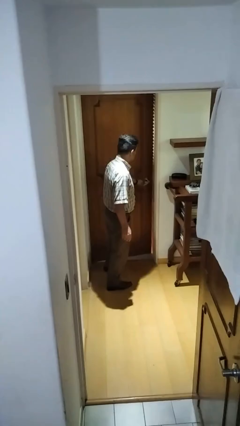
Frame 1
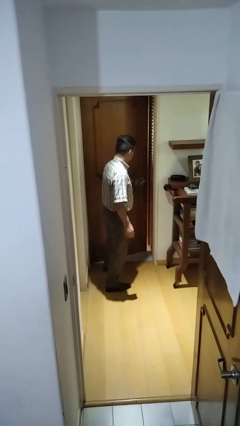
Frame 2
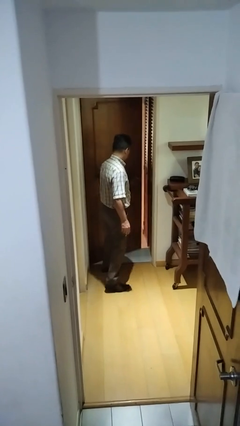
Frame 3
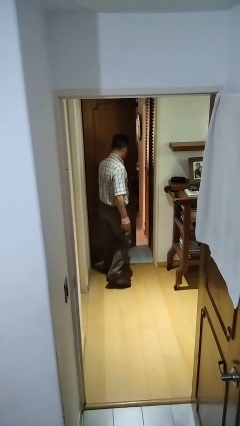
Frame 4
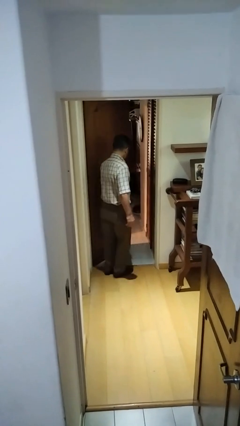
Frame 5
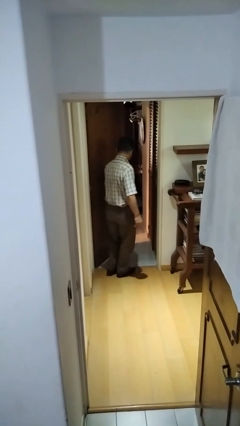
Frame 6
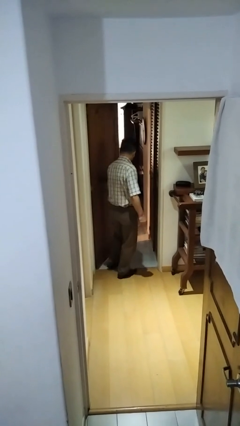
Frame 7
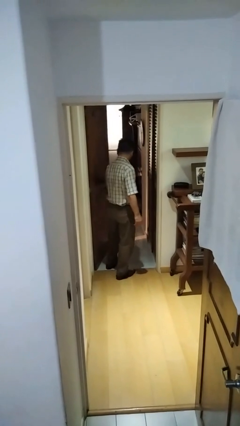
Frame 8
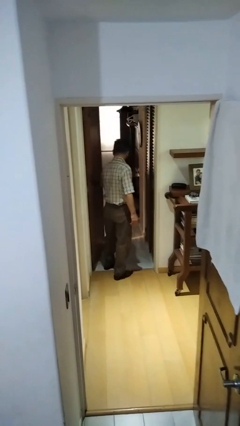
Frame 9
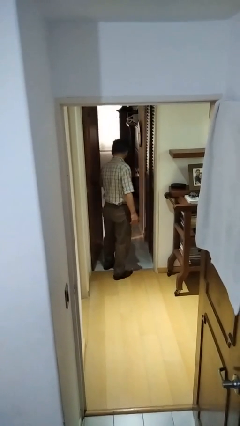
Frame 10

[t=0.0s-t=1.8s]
person opens facility door

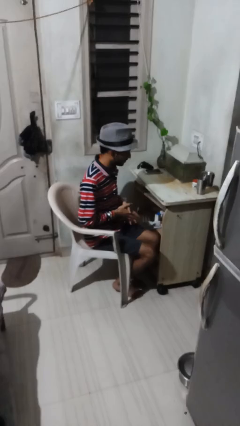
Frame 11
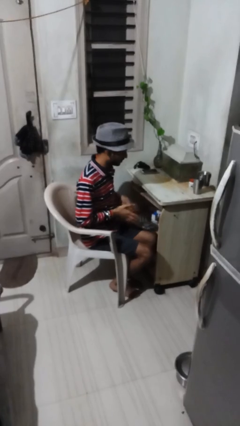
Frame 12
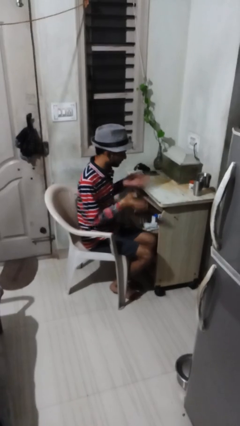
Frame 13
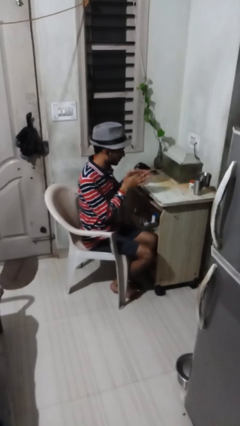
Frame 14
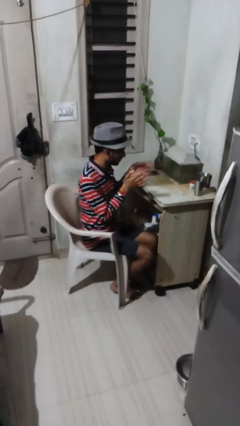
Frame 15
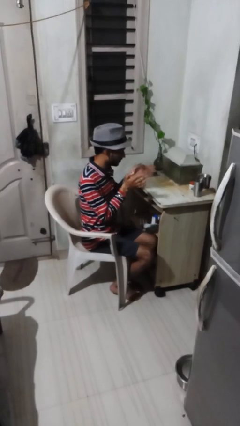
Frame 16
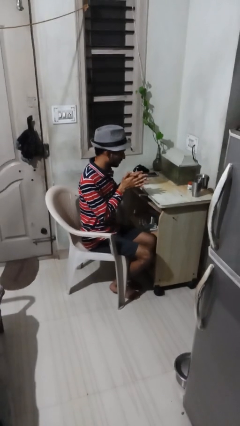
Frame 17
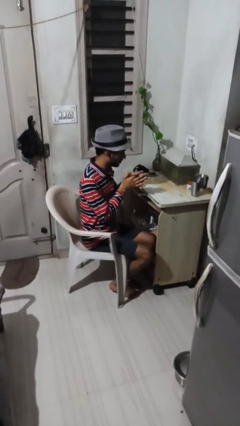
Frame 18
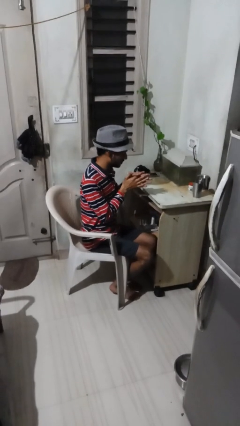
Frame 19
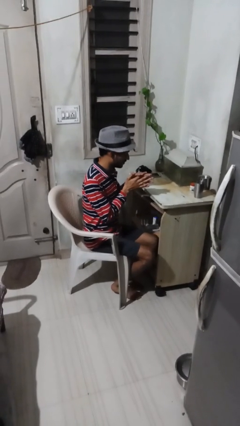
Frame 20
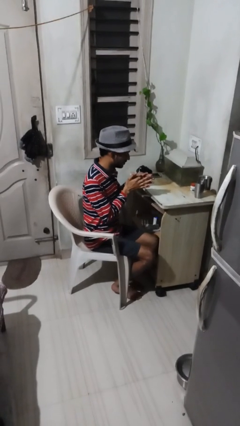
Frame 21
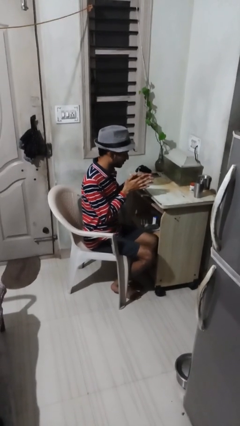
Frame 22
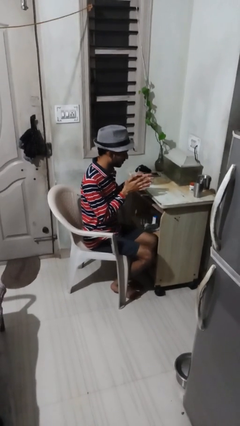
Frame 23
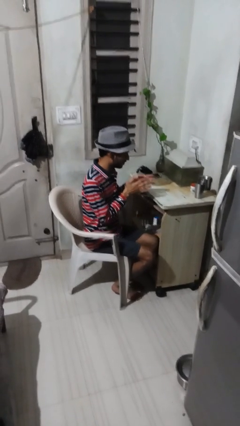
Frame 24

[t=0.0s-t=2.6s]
person claps hands

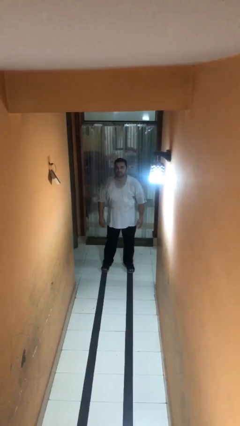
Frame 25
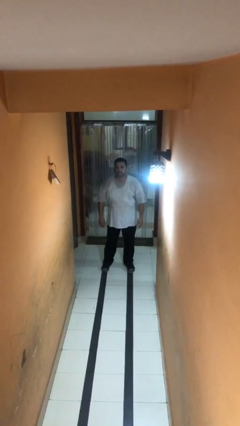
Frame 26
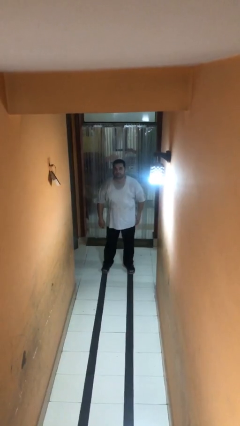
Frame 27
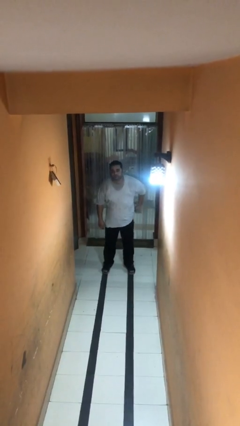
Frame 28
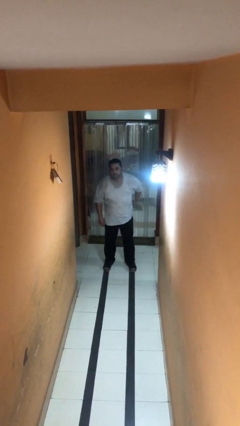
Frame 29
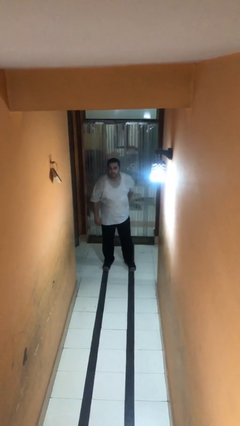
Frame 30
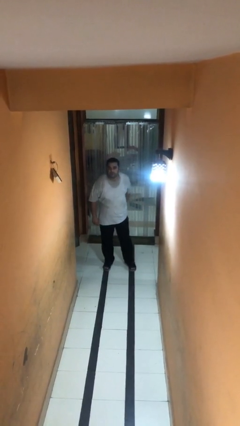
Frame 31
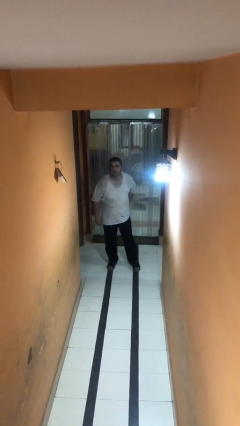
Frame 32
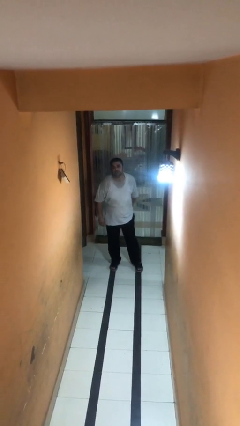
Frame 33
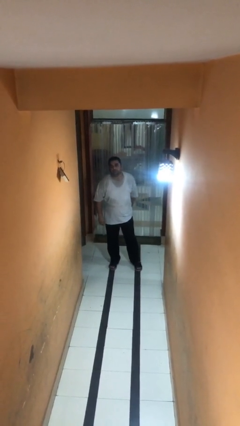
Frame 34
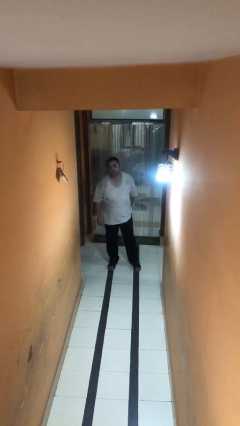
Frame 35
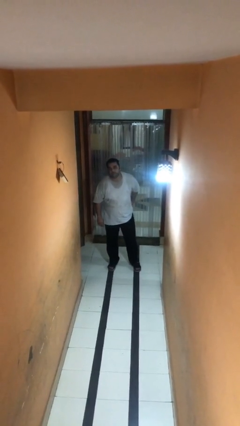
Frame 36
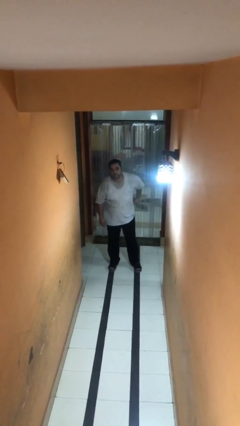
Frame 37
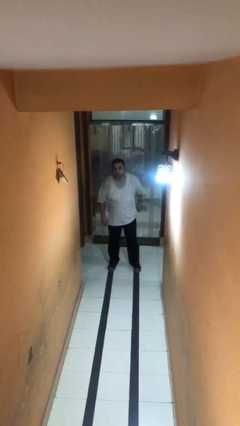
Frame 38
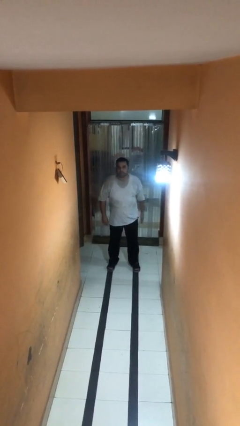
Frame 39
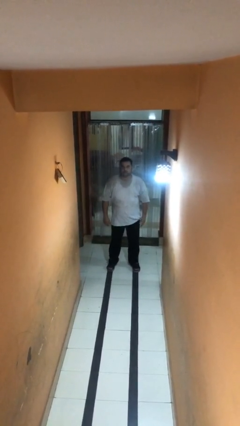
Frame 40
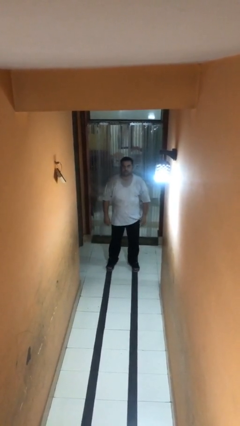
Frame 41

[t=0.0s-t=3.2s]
person puts hands in back pockets

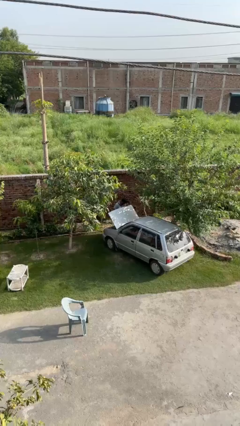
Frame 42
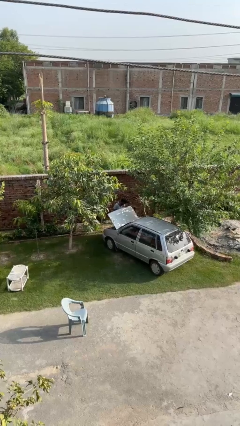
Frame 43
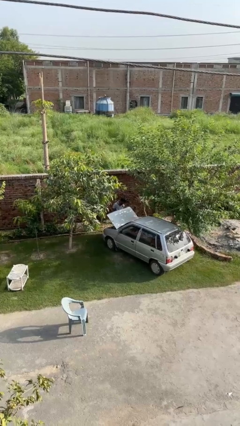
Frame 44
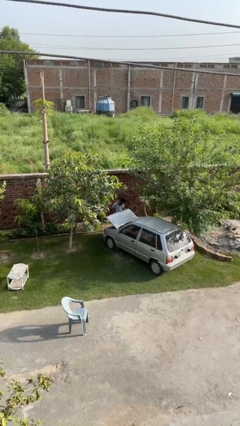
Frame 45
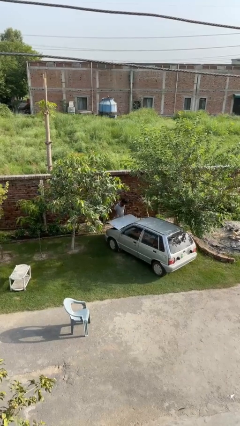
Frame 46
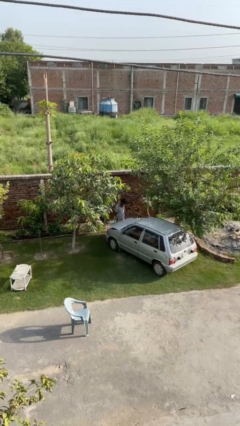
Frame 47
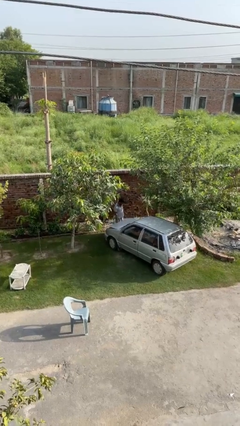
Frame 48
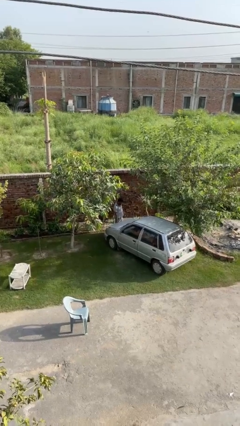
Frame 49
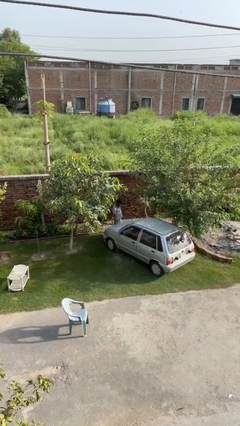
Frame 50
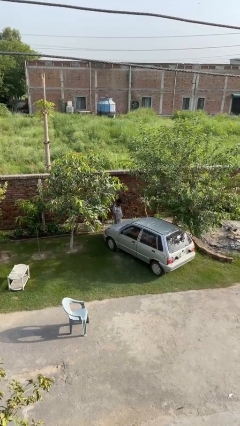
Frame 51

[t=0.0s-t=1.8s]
person closes car hood

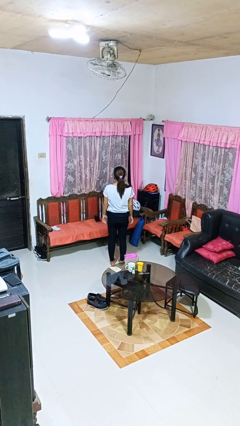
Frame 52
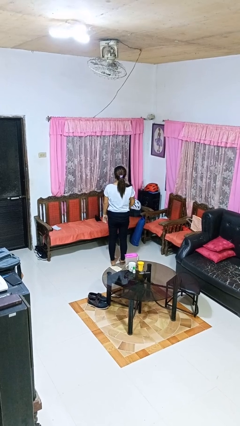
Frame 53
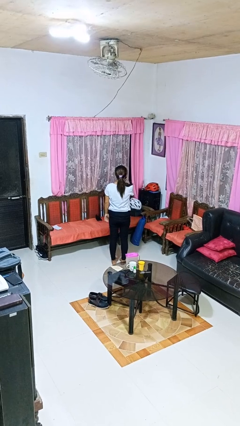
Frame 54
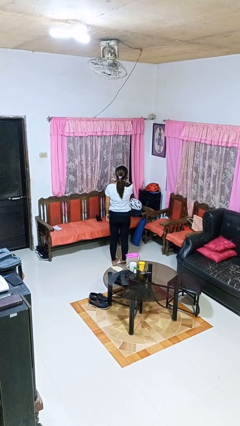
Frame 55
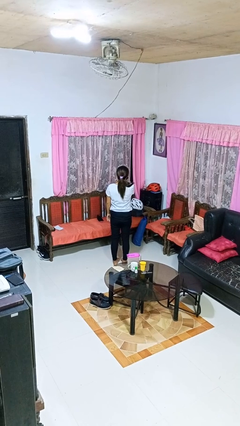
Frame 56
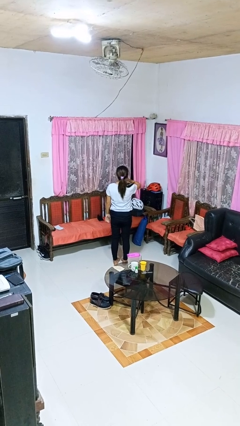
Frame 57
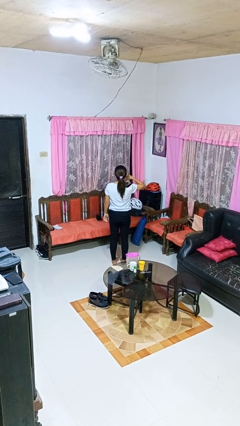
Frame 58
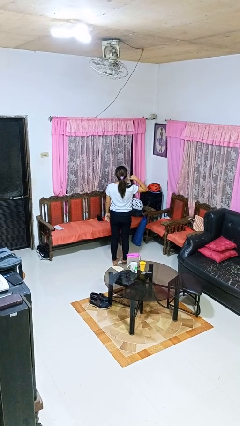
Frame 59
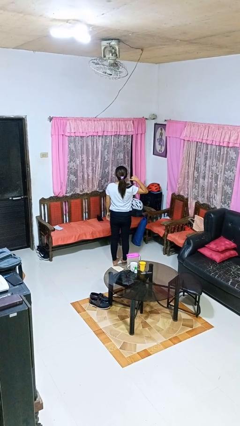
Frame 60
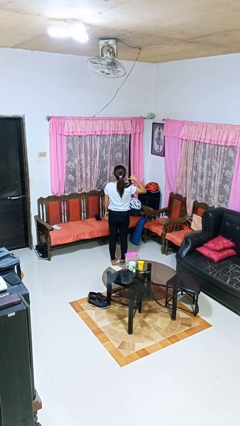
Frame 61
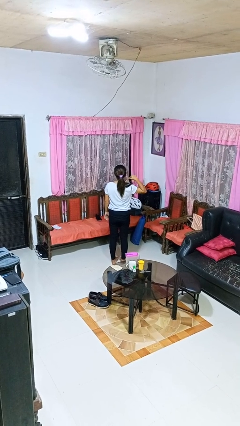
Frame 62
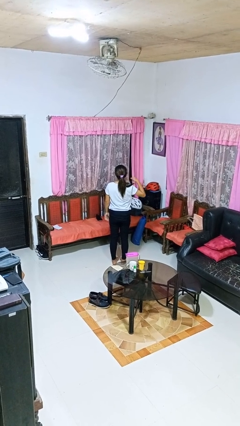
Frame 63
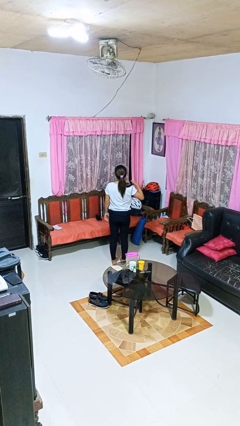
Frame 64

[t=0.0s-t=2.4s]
person gestures cut

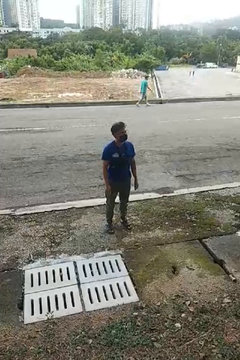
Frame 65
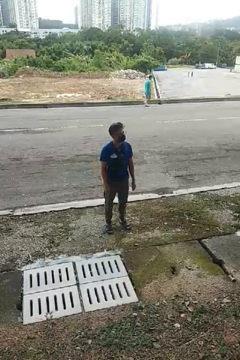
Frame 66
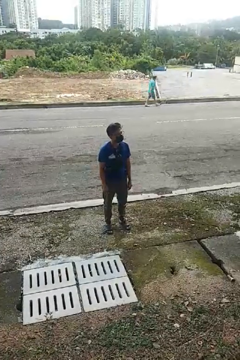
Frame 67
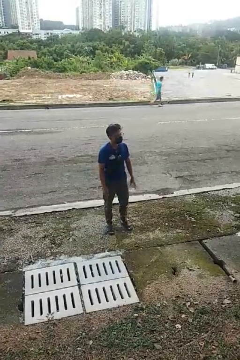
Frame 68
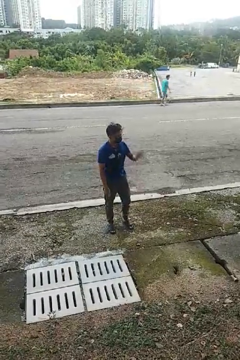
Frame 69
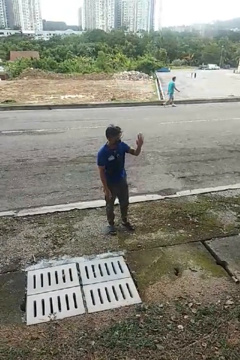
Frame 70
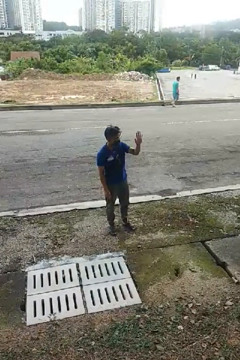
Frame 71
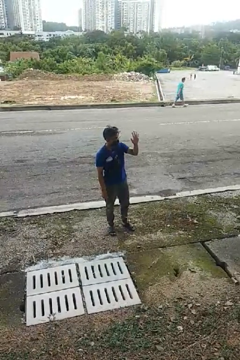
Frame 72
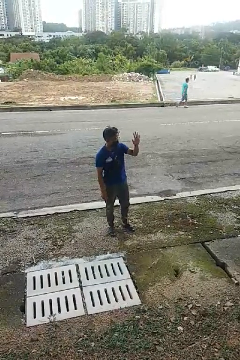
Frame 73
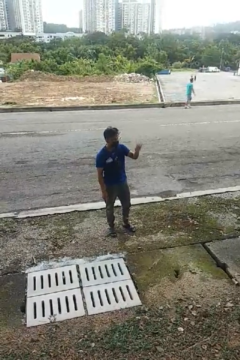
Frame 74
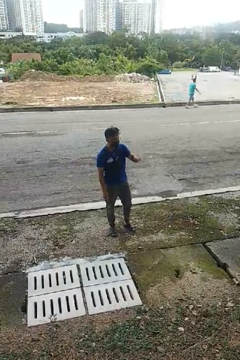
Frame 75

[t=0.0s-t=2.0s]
person gestures stop

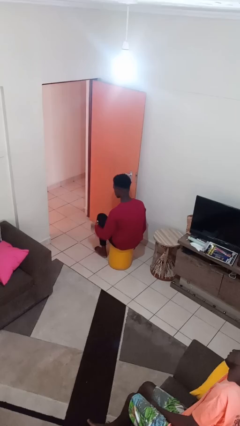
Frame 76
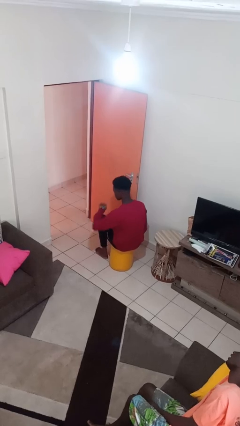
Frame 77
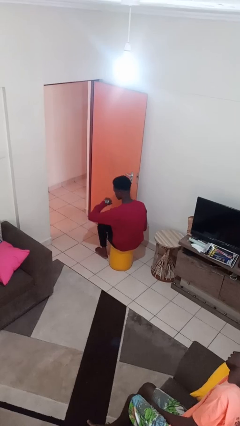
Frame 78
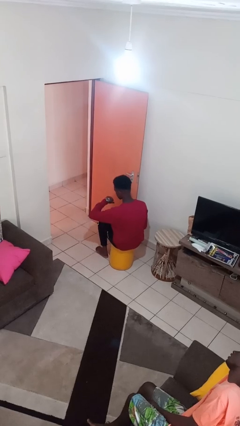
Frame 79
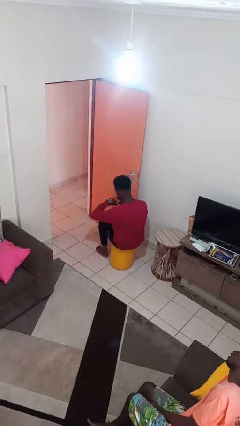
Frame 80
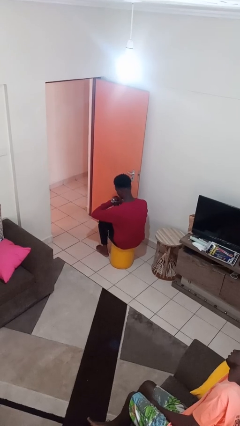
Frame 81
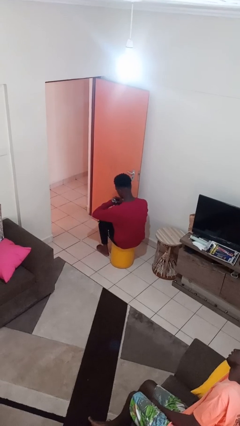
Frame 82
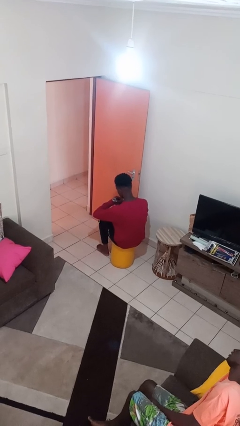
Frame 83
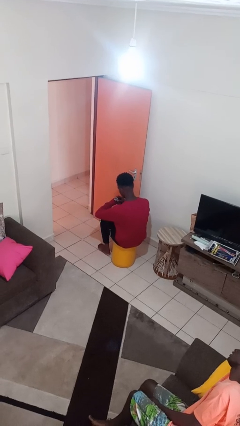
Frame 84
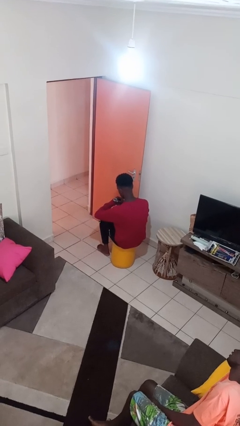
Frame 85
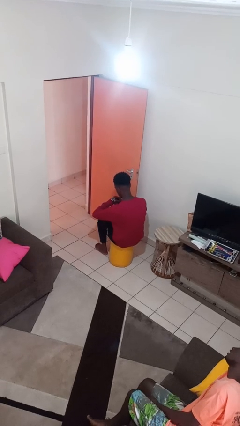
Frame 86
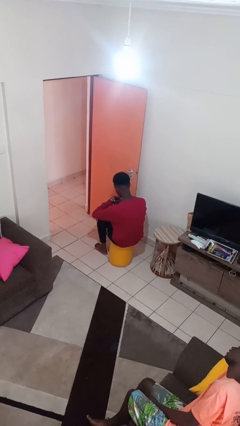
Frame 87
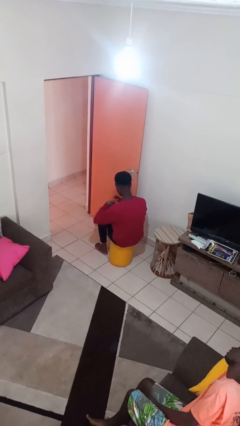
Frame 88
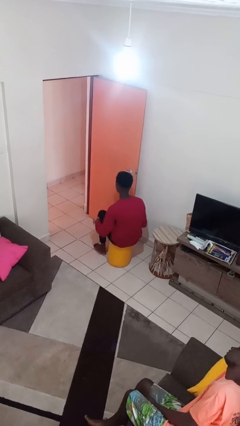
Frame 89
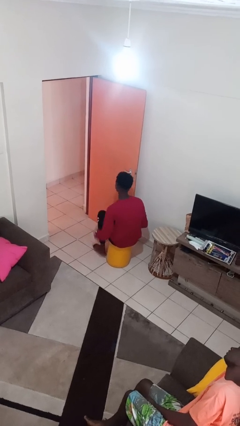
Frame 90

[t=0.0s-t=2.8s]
person looks at wristwatch

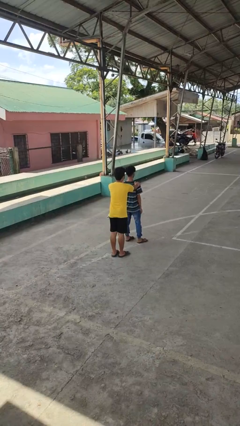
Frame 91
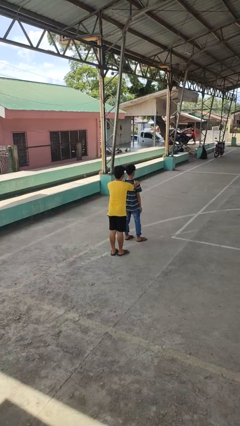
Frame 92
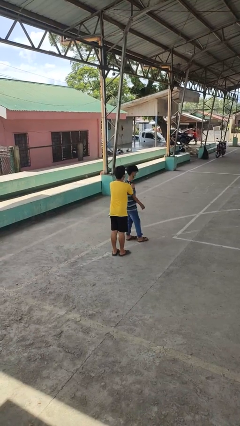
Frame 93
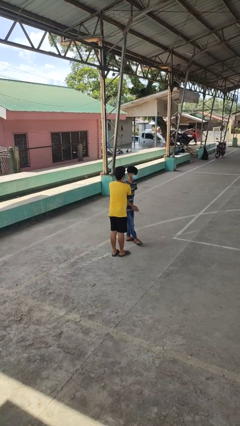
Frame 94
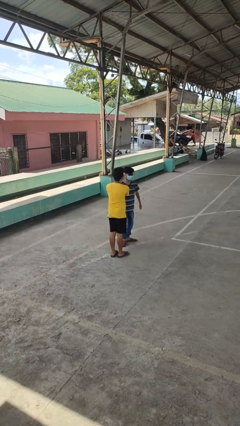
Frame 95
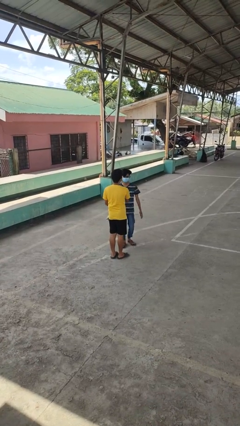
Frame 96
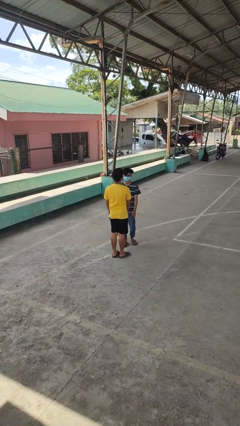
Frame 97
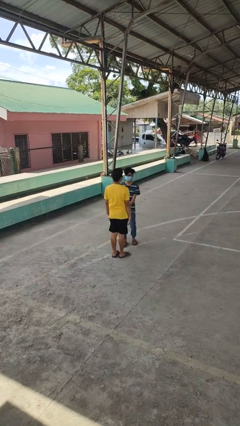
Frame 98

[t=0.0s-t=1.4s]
person spins person around
